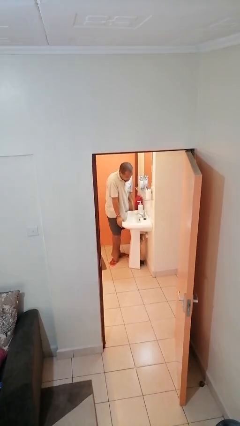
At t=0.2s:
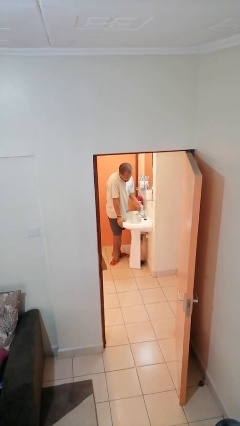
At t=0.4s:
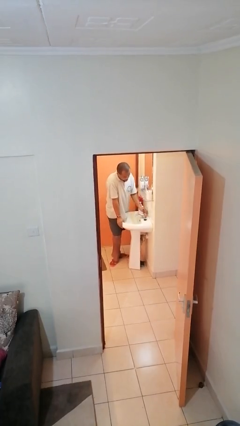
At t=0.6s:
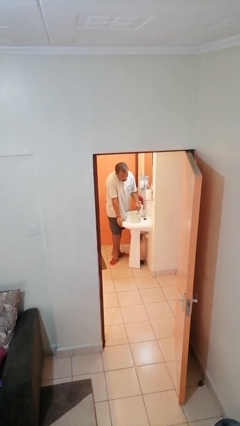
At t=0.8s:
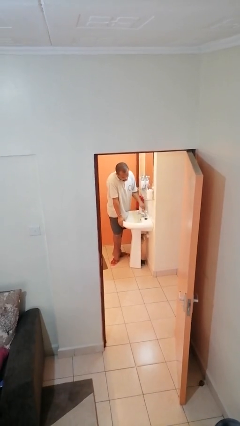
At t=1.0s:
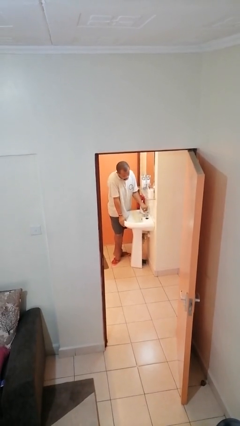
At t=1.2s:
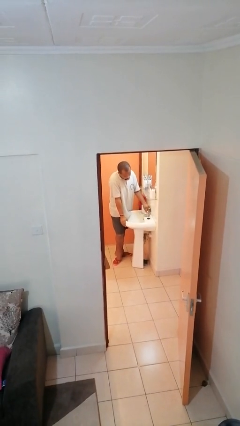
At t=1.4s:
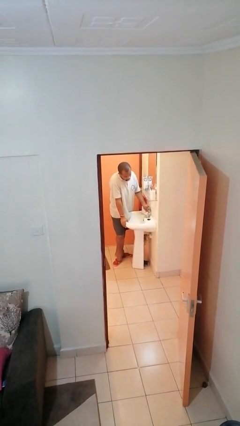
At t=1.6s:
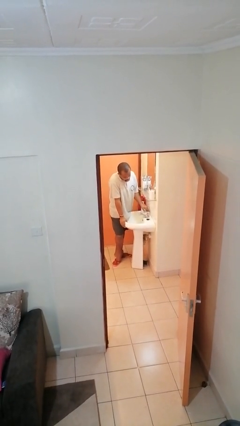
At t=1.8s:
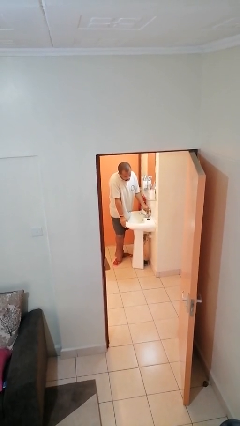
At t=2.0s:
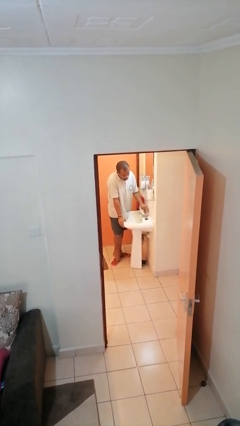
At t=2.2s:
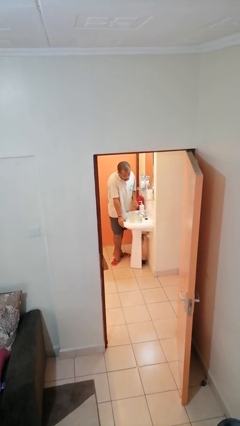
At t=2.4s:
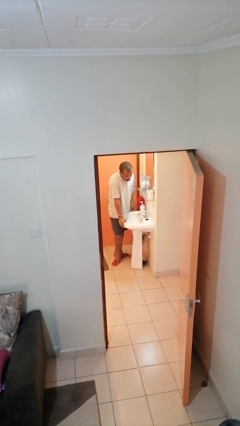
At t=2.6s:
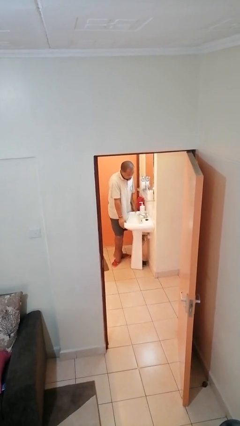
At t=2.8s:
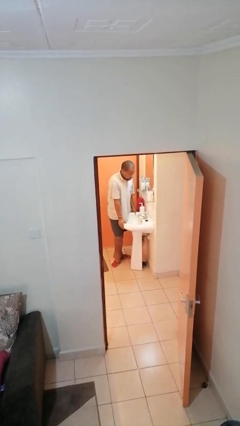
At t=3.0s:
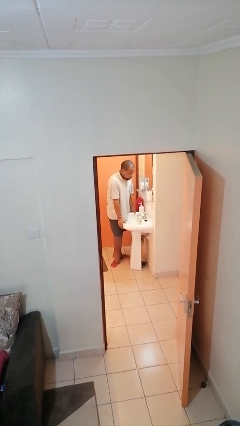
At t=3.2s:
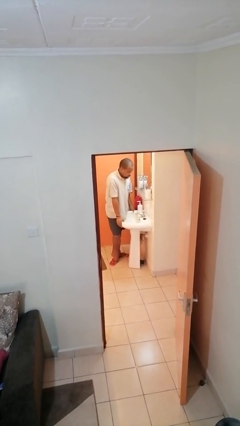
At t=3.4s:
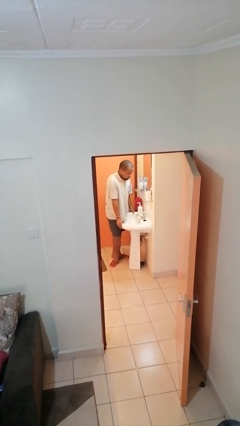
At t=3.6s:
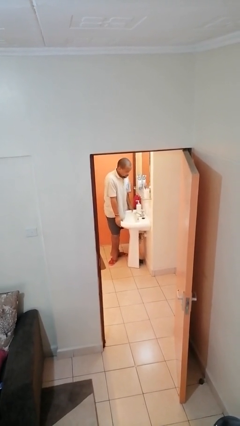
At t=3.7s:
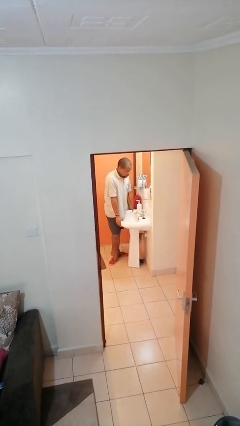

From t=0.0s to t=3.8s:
person turns off faucet

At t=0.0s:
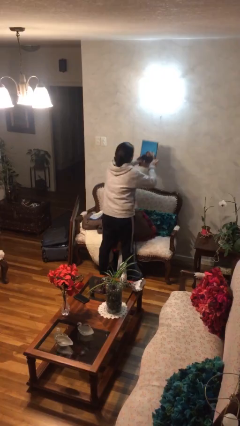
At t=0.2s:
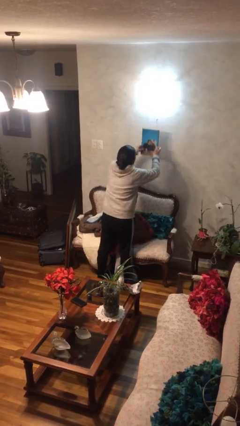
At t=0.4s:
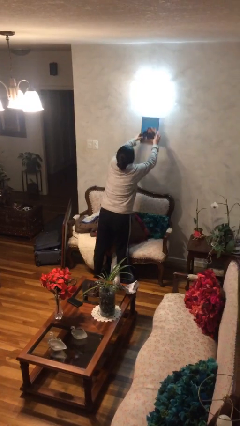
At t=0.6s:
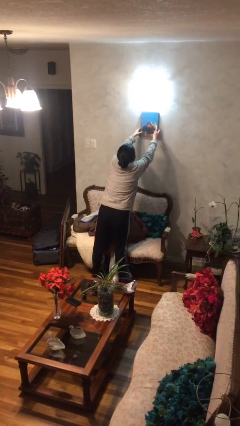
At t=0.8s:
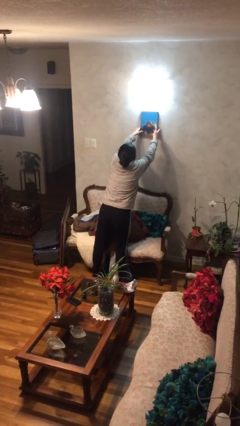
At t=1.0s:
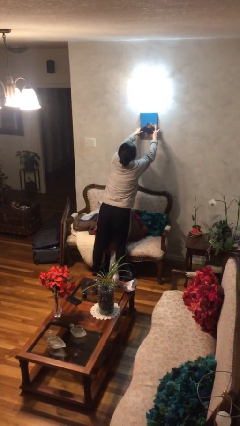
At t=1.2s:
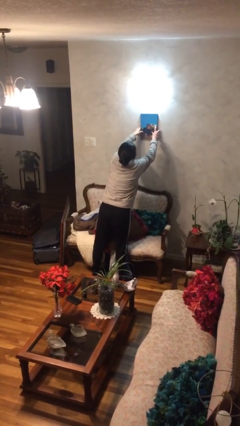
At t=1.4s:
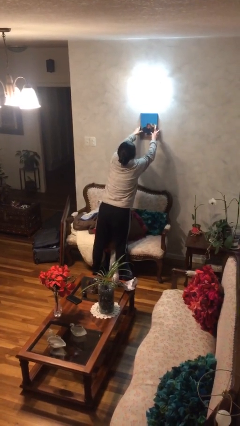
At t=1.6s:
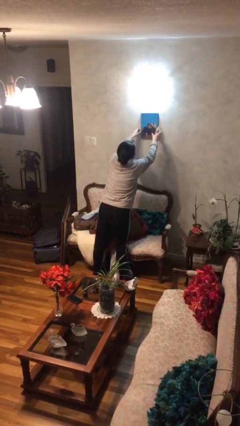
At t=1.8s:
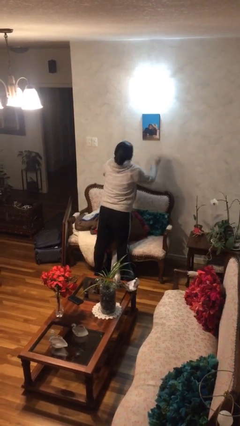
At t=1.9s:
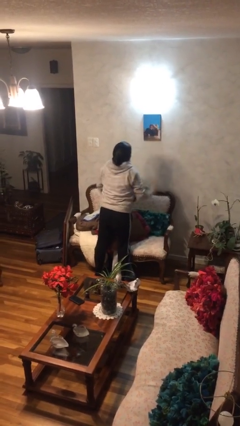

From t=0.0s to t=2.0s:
person puts up picture frame

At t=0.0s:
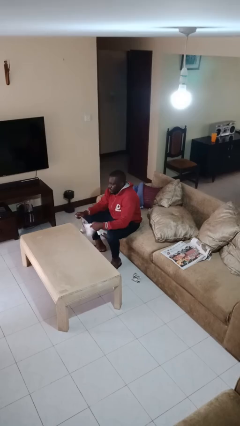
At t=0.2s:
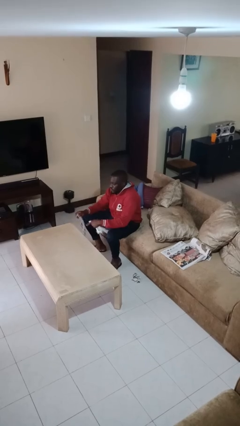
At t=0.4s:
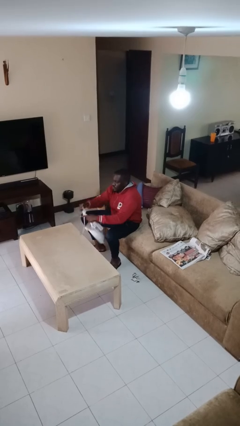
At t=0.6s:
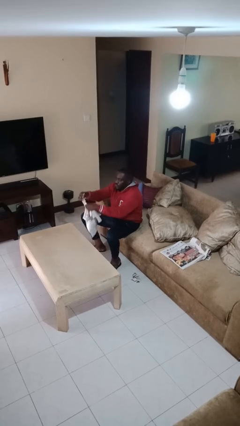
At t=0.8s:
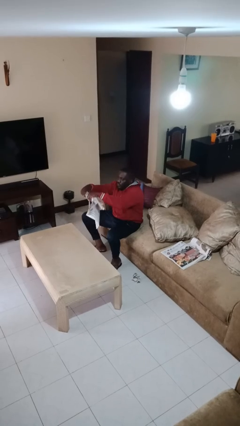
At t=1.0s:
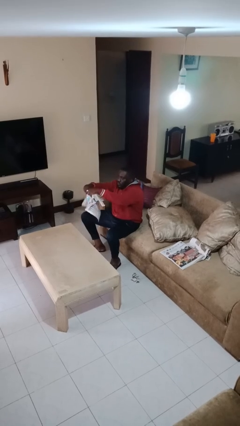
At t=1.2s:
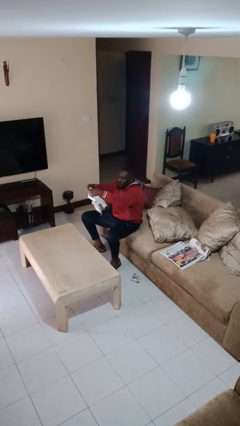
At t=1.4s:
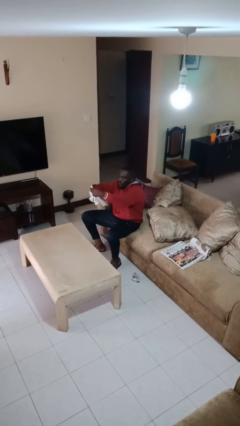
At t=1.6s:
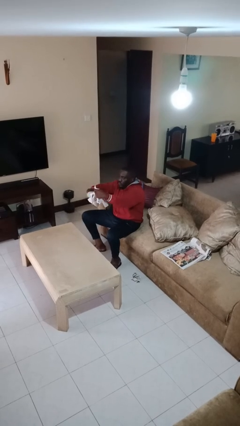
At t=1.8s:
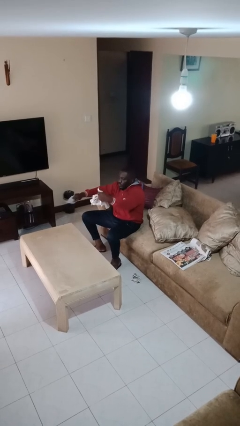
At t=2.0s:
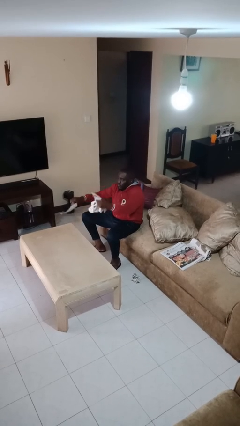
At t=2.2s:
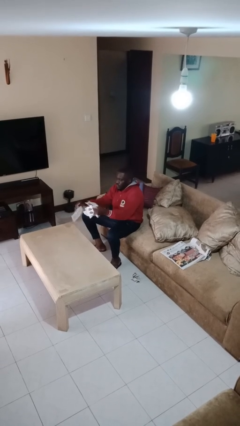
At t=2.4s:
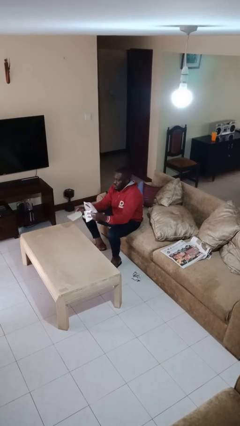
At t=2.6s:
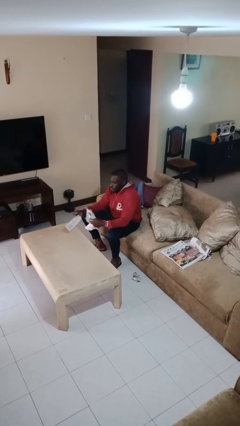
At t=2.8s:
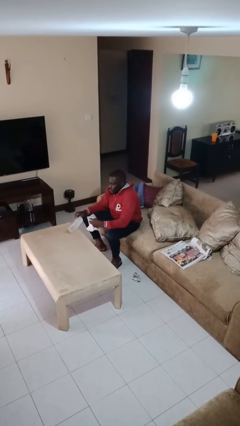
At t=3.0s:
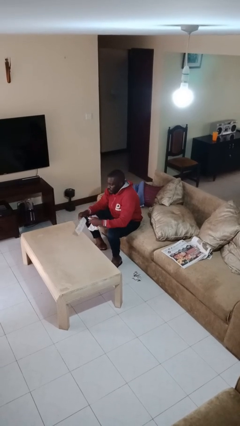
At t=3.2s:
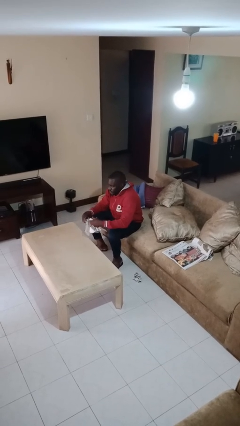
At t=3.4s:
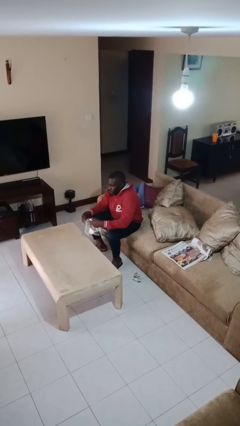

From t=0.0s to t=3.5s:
person tears paper

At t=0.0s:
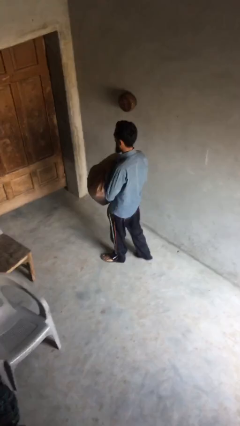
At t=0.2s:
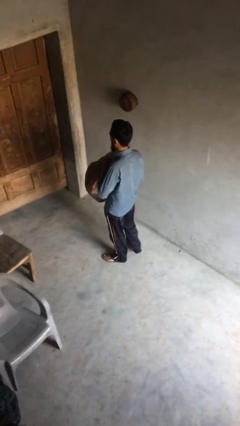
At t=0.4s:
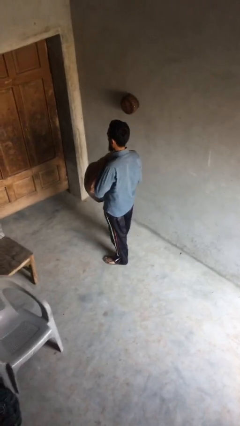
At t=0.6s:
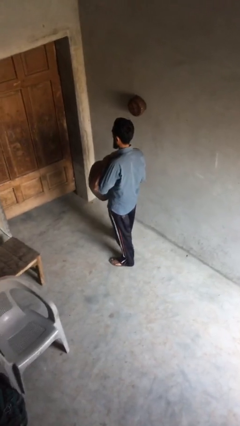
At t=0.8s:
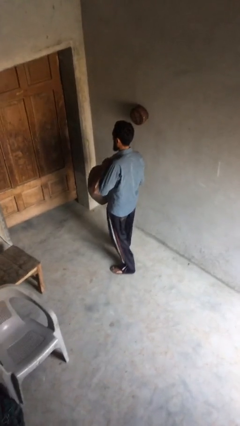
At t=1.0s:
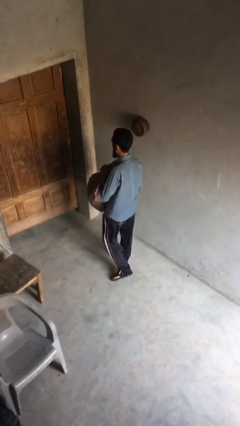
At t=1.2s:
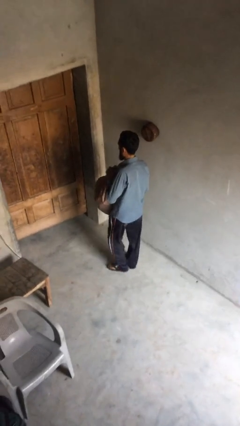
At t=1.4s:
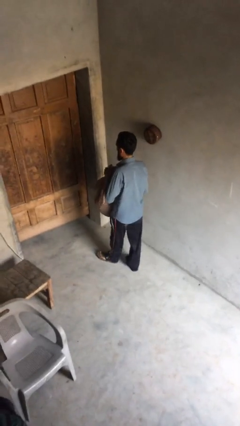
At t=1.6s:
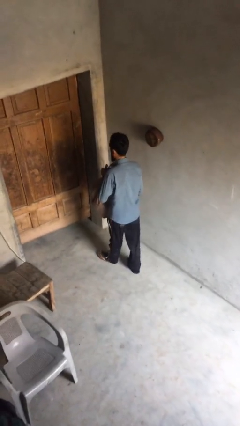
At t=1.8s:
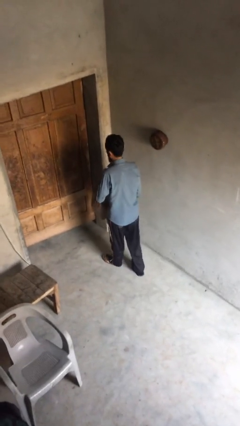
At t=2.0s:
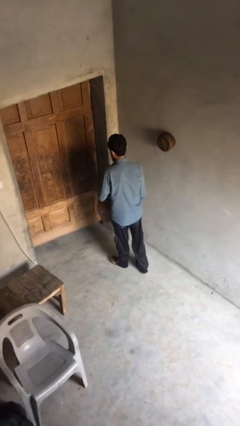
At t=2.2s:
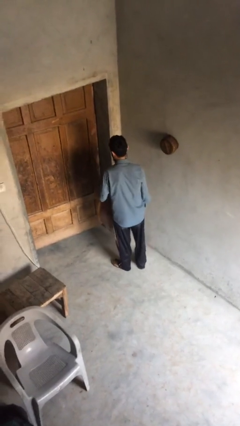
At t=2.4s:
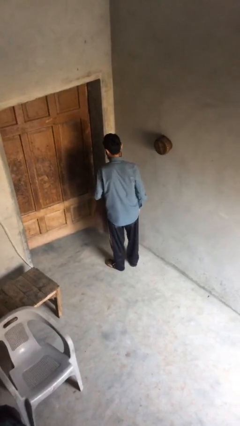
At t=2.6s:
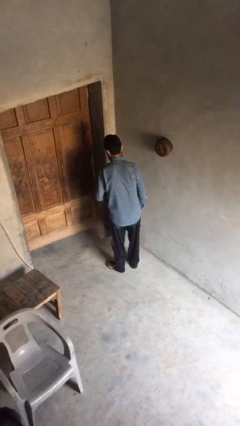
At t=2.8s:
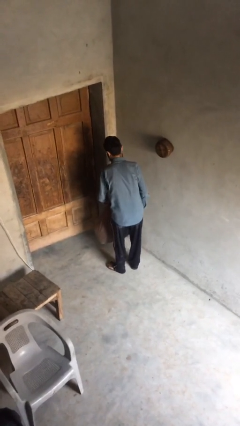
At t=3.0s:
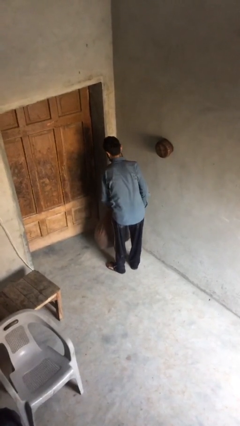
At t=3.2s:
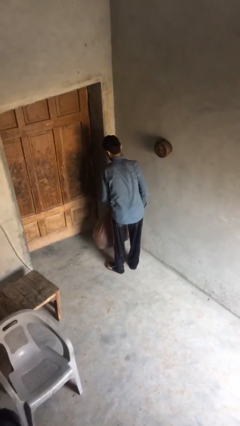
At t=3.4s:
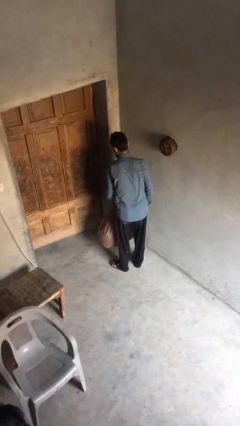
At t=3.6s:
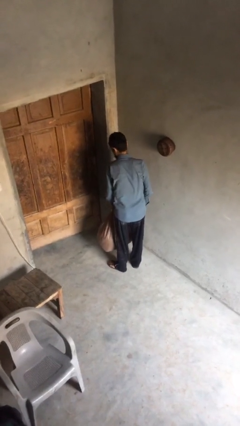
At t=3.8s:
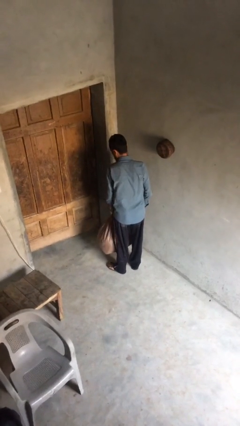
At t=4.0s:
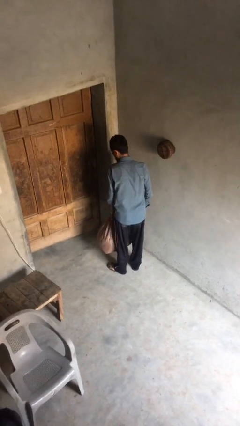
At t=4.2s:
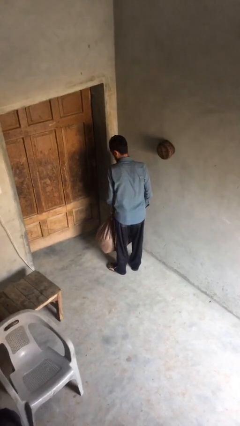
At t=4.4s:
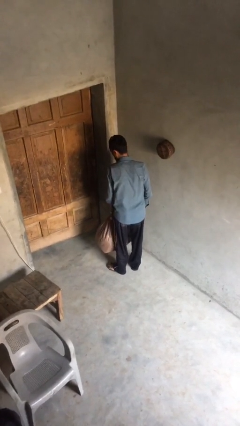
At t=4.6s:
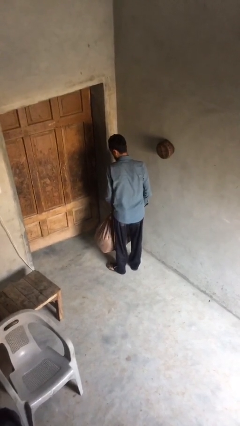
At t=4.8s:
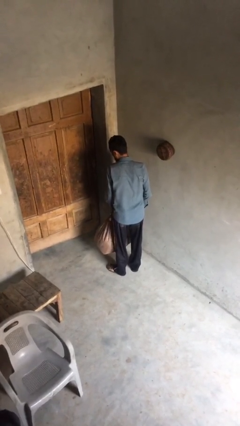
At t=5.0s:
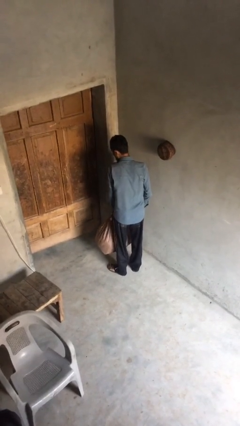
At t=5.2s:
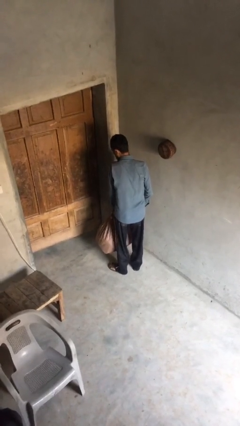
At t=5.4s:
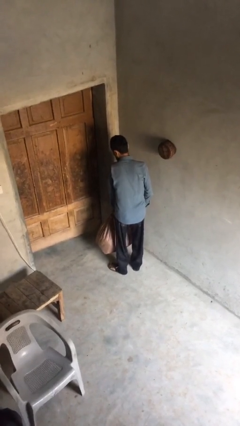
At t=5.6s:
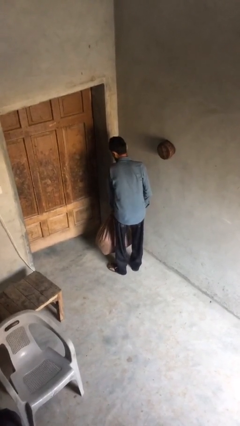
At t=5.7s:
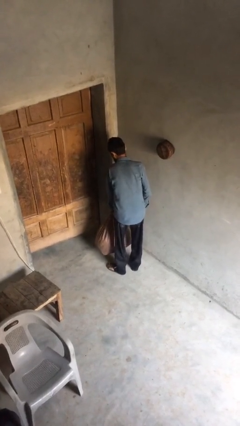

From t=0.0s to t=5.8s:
person puts down object on floor

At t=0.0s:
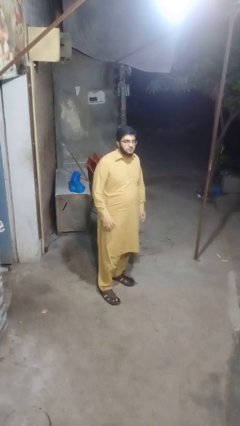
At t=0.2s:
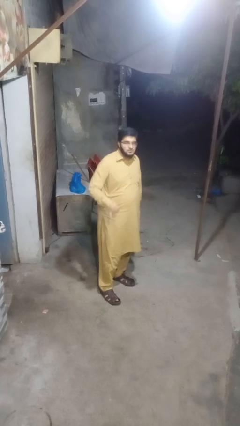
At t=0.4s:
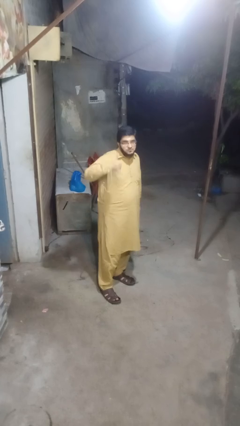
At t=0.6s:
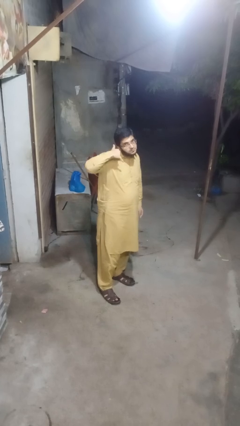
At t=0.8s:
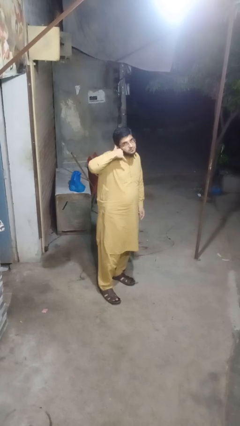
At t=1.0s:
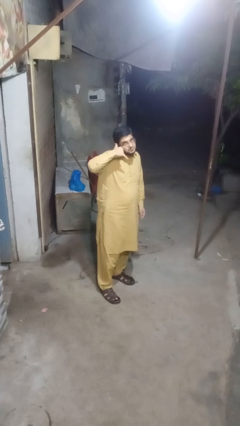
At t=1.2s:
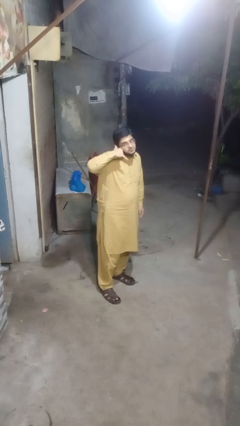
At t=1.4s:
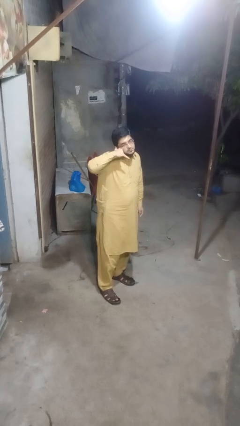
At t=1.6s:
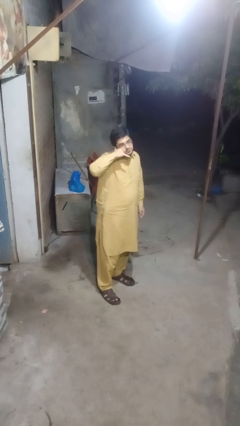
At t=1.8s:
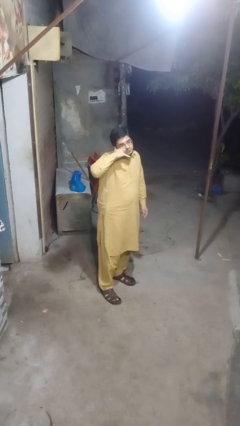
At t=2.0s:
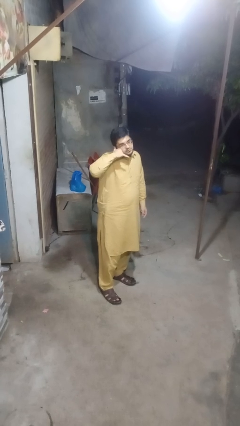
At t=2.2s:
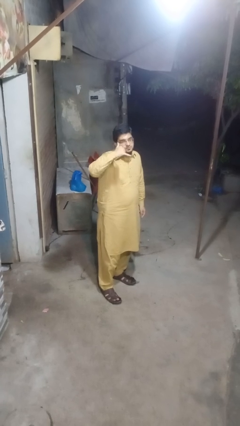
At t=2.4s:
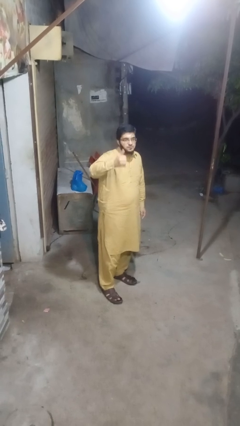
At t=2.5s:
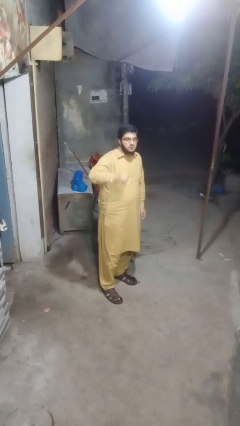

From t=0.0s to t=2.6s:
person gestures call me

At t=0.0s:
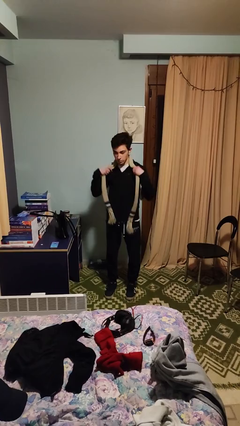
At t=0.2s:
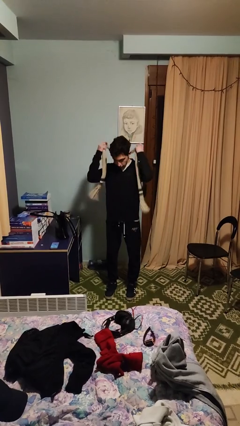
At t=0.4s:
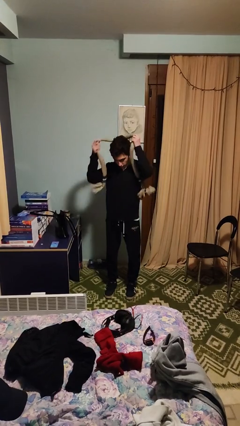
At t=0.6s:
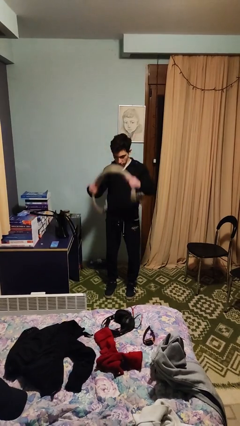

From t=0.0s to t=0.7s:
person takes off scarf
